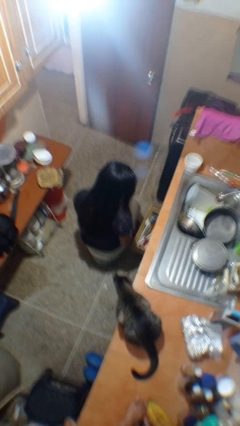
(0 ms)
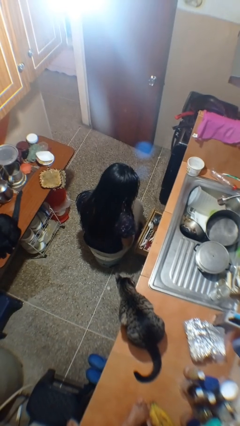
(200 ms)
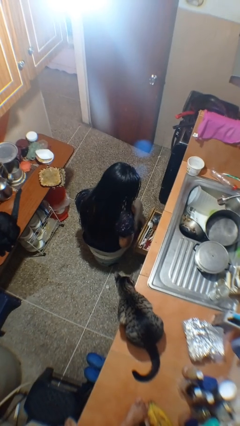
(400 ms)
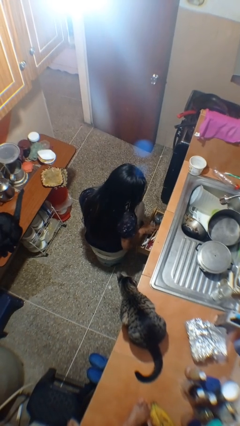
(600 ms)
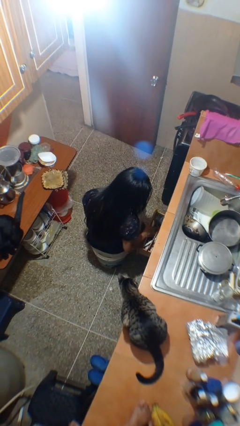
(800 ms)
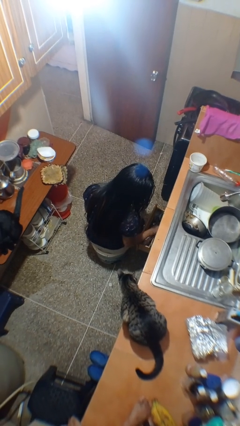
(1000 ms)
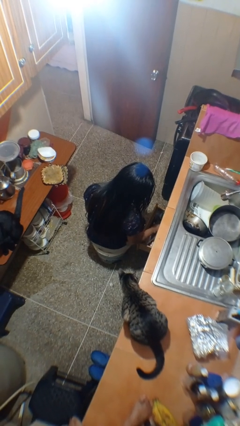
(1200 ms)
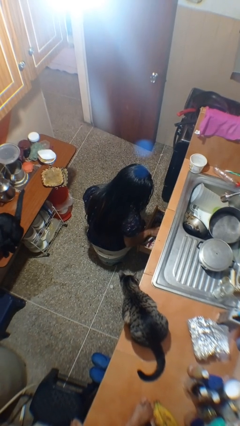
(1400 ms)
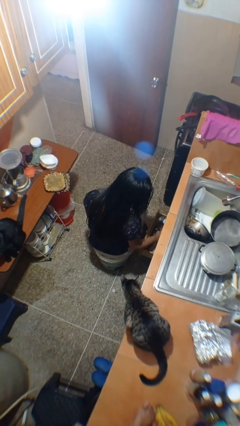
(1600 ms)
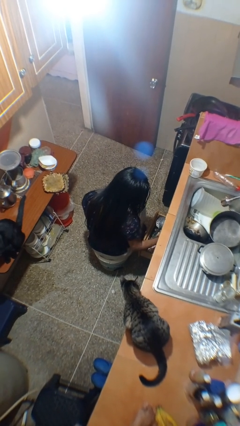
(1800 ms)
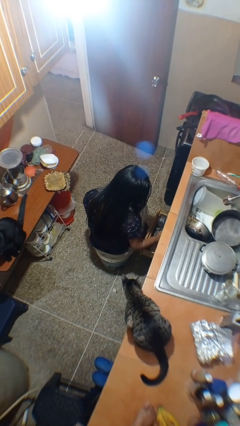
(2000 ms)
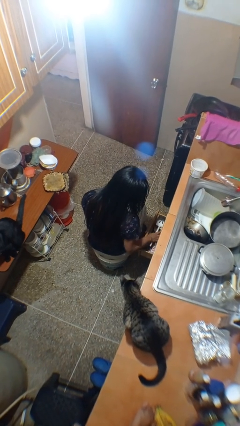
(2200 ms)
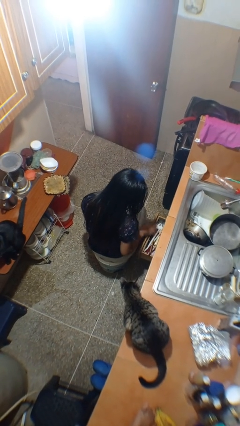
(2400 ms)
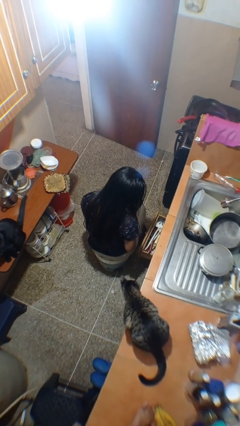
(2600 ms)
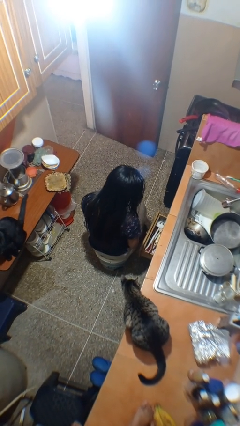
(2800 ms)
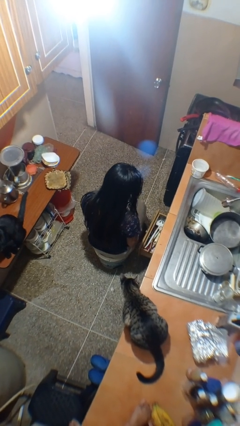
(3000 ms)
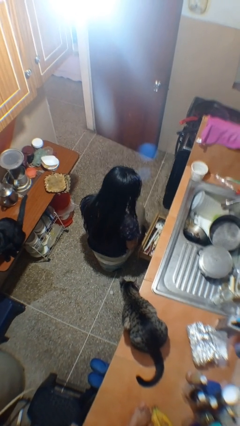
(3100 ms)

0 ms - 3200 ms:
person searches in kitchen drawer

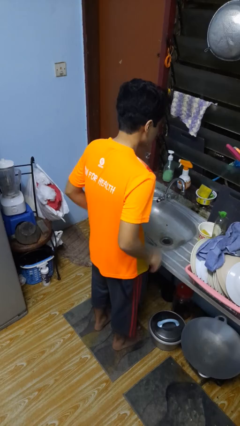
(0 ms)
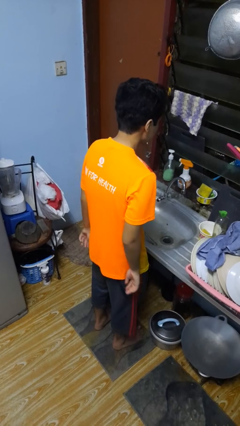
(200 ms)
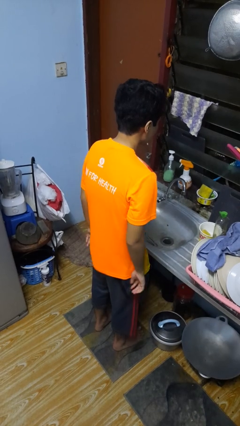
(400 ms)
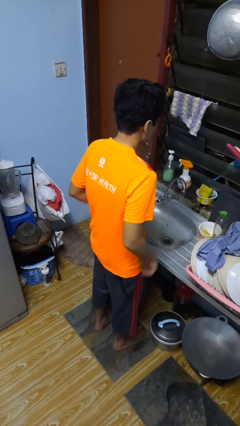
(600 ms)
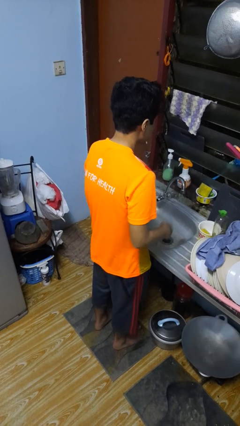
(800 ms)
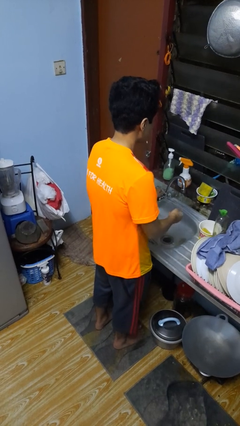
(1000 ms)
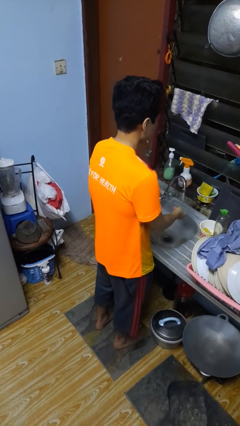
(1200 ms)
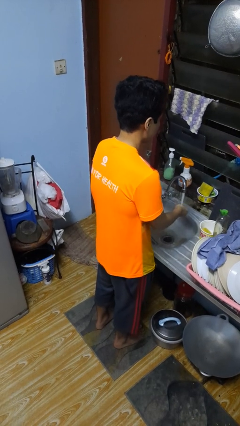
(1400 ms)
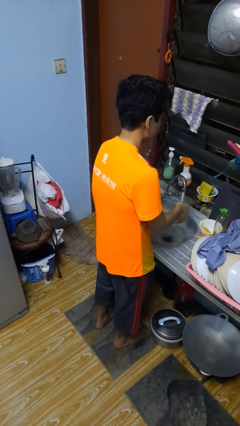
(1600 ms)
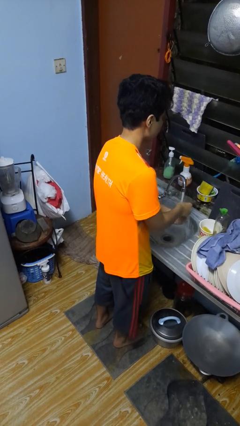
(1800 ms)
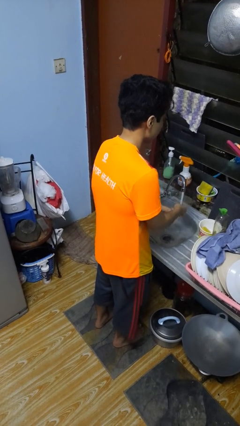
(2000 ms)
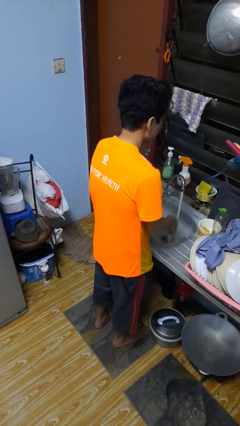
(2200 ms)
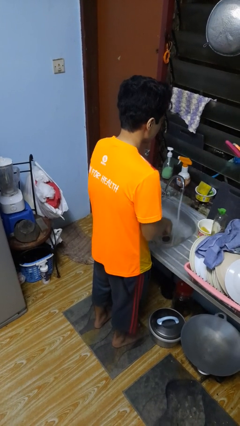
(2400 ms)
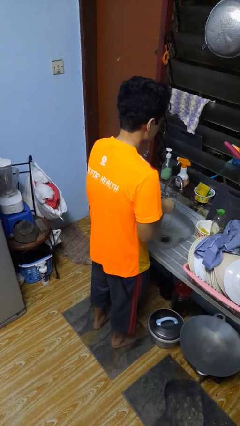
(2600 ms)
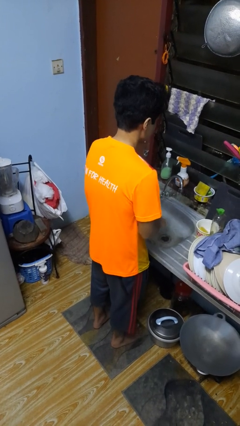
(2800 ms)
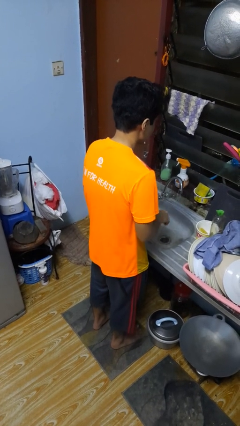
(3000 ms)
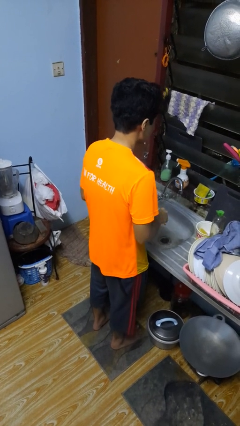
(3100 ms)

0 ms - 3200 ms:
person washes hands

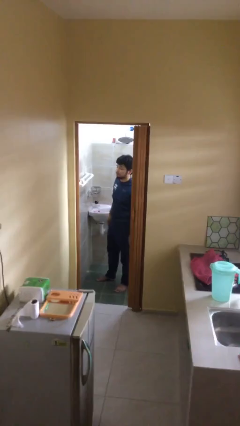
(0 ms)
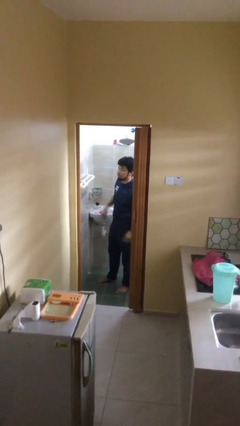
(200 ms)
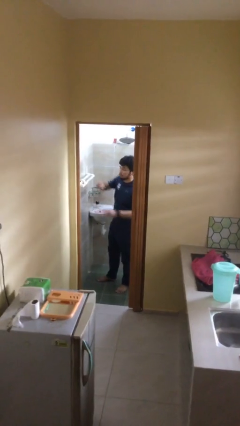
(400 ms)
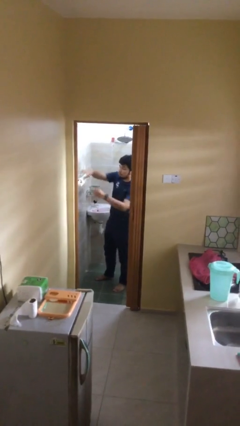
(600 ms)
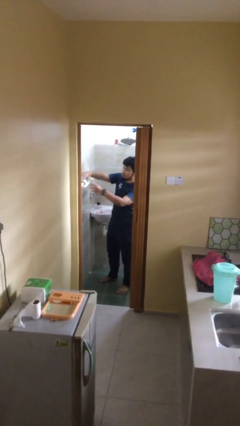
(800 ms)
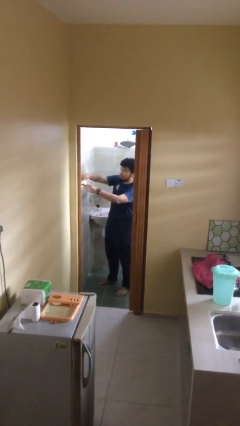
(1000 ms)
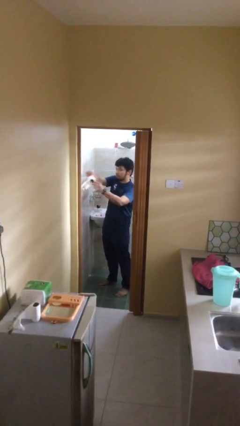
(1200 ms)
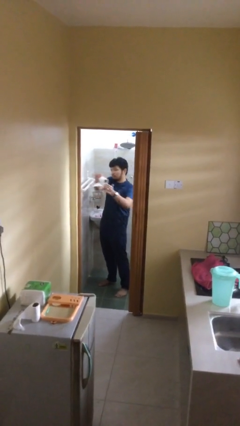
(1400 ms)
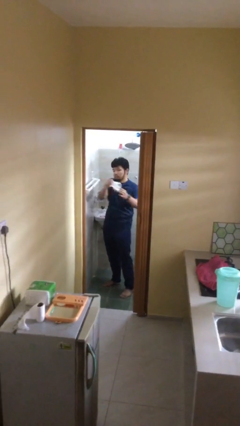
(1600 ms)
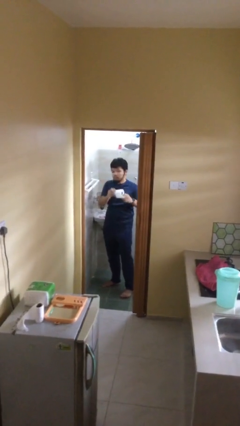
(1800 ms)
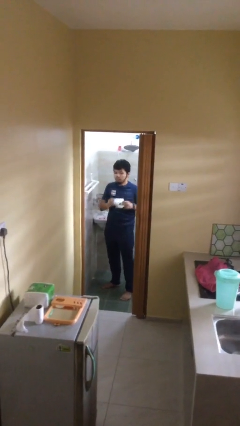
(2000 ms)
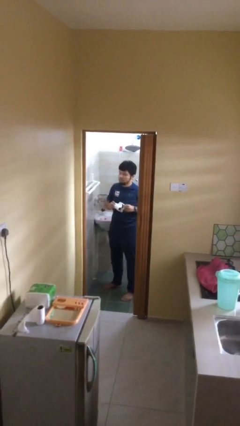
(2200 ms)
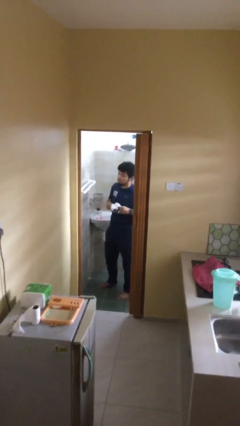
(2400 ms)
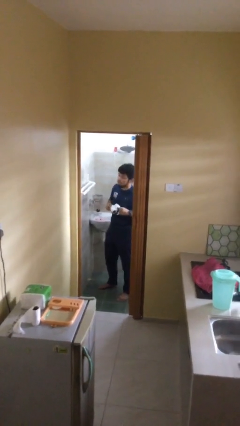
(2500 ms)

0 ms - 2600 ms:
person picks up object from countertop

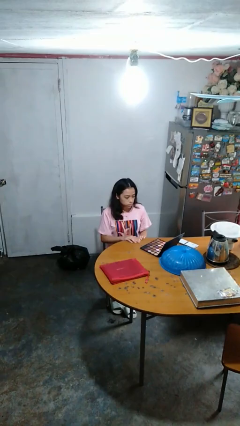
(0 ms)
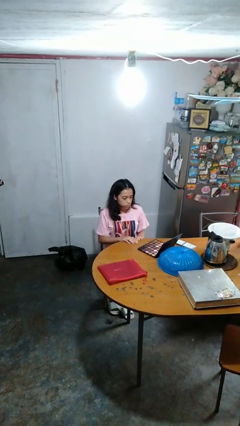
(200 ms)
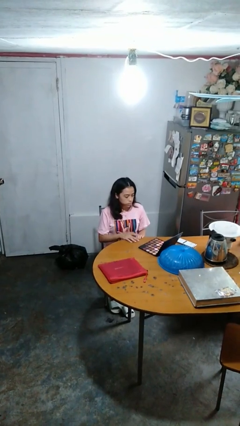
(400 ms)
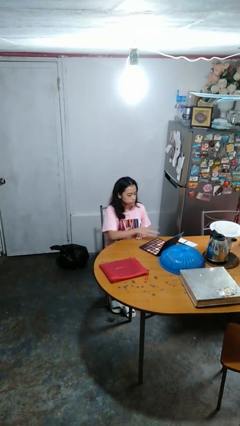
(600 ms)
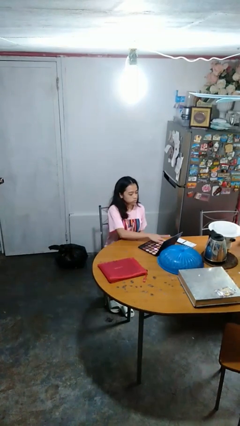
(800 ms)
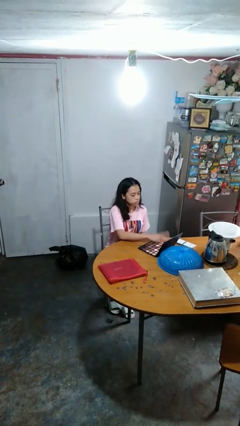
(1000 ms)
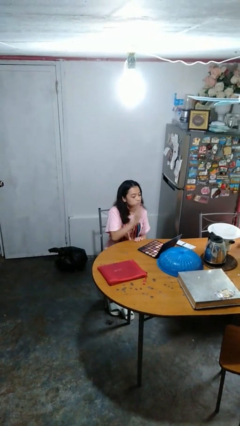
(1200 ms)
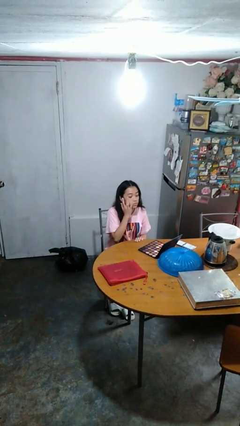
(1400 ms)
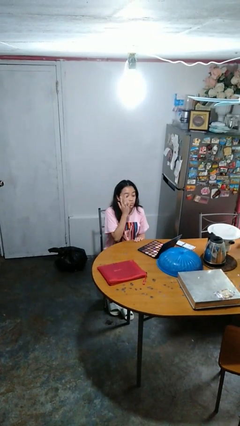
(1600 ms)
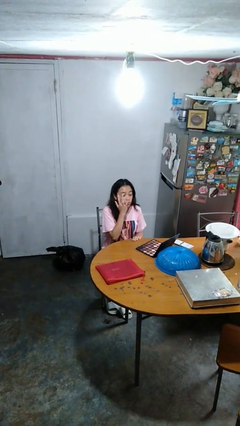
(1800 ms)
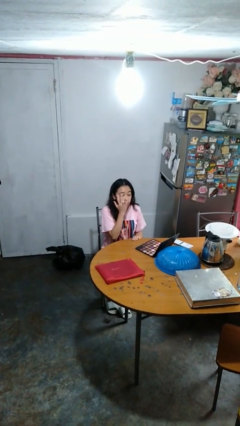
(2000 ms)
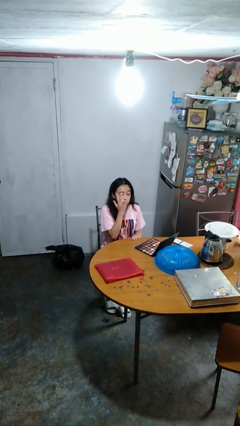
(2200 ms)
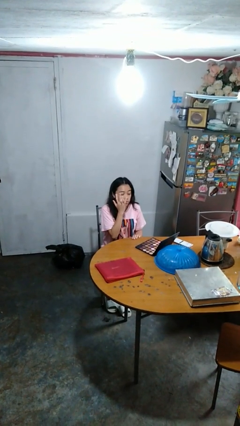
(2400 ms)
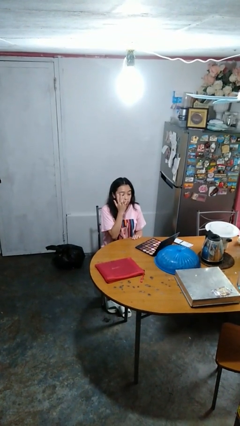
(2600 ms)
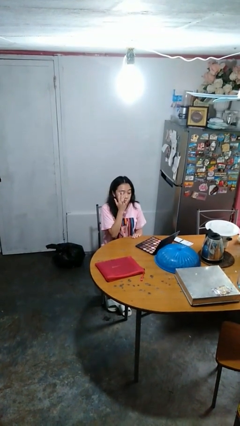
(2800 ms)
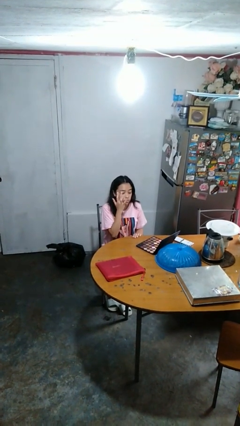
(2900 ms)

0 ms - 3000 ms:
person applies eye makeup

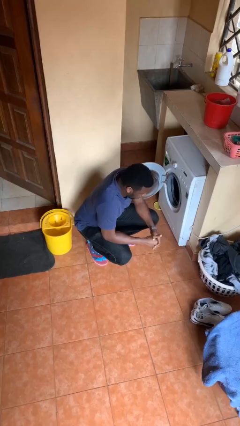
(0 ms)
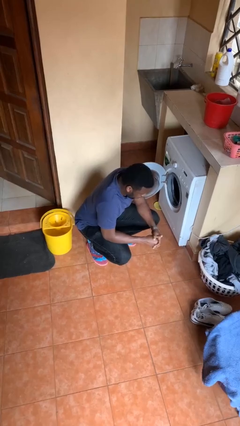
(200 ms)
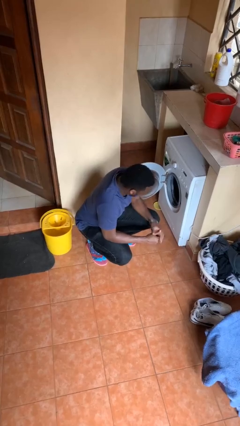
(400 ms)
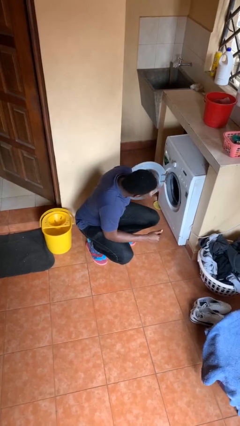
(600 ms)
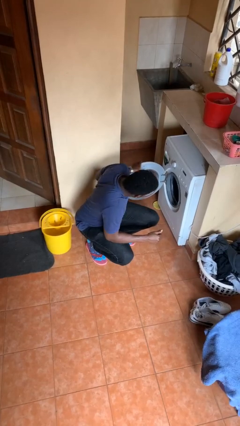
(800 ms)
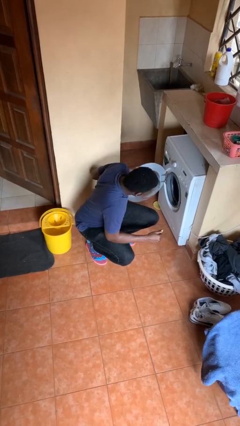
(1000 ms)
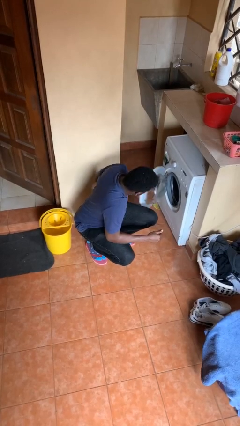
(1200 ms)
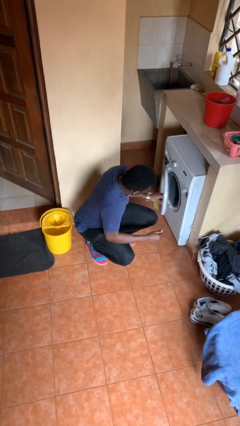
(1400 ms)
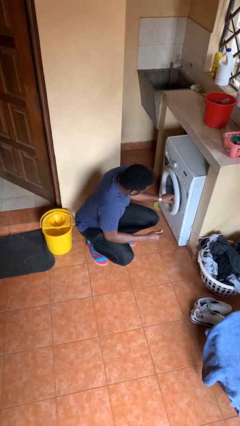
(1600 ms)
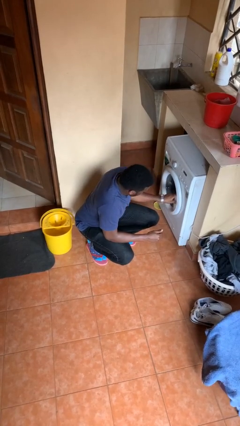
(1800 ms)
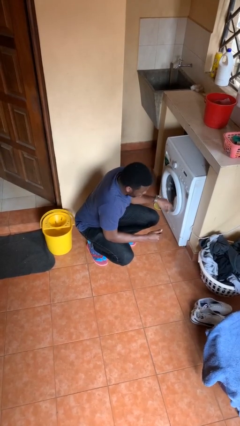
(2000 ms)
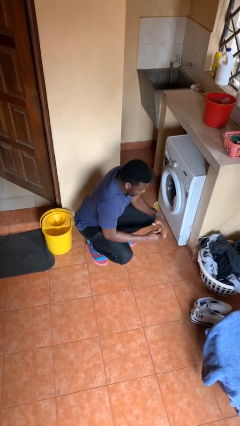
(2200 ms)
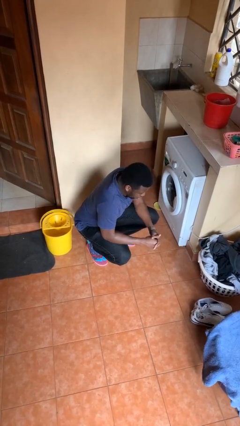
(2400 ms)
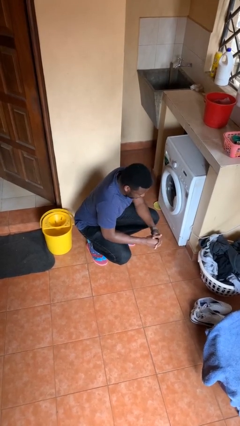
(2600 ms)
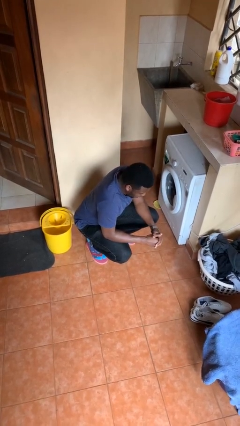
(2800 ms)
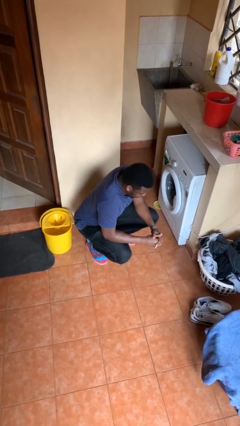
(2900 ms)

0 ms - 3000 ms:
person closes clothes washer

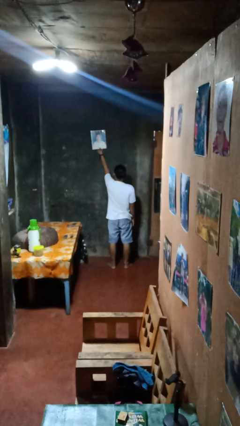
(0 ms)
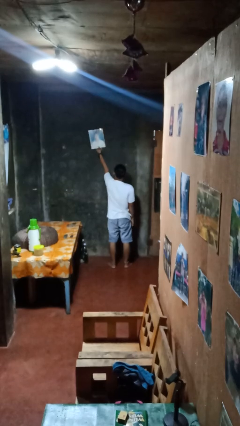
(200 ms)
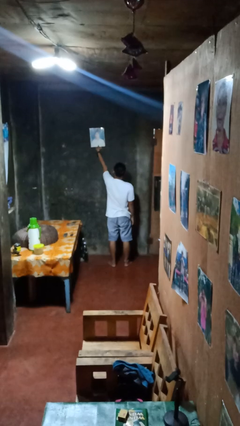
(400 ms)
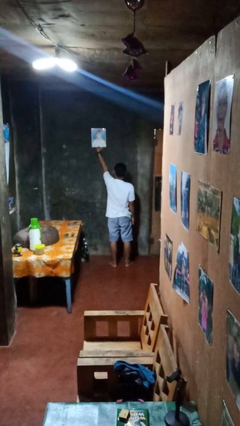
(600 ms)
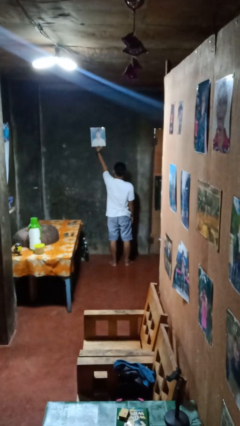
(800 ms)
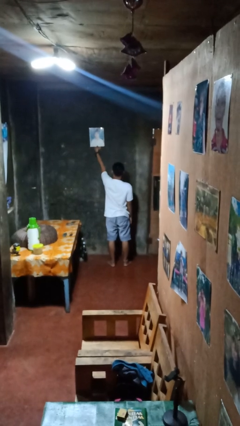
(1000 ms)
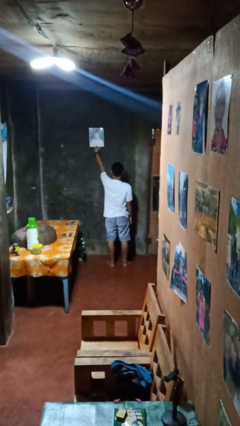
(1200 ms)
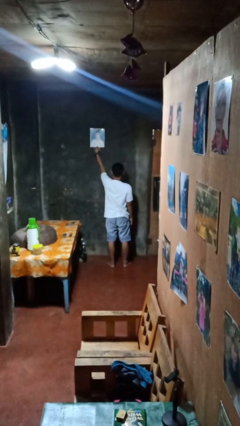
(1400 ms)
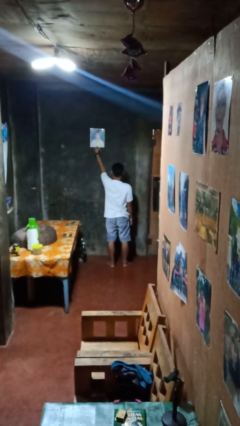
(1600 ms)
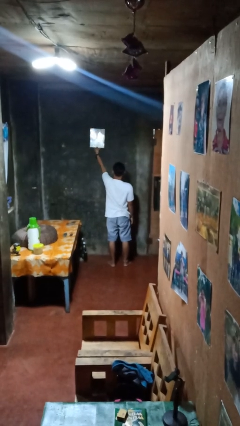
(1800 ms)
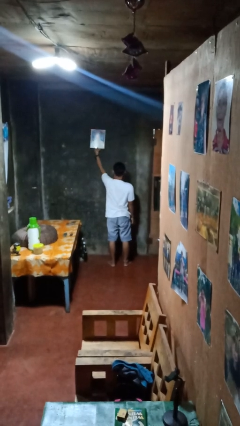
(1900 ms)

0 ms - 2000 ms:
person puts up picture frame

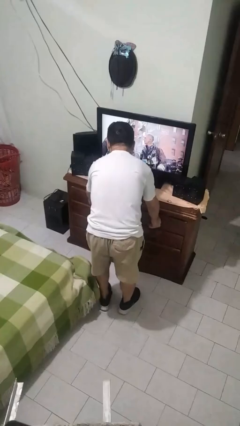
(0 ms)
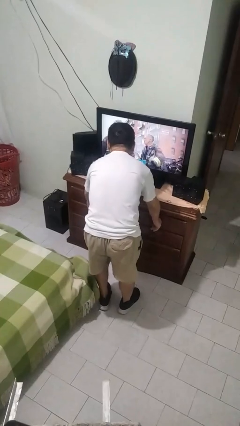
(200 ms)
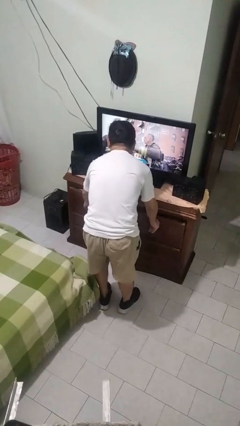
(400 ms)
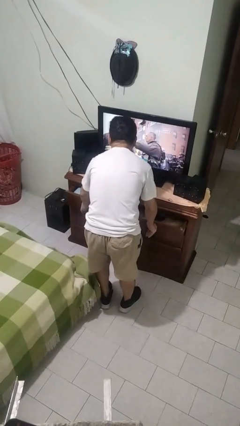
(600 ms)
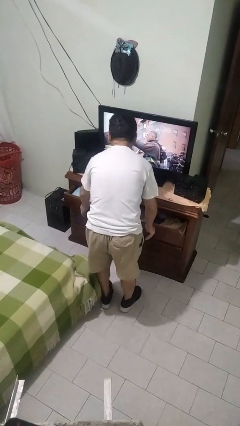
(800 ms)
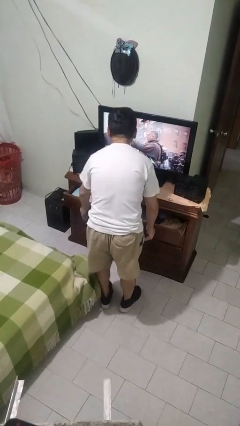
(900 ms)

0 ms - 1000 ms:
person opens dresser drawer
